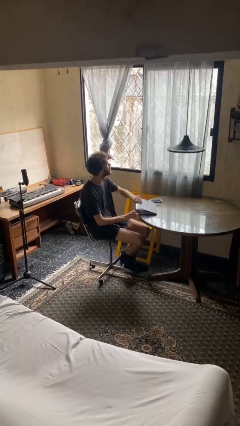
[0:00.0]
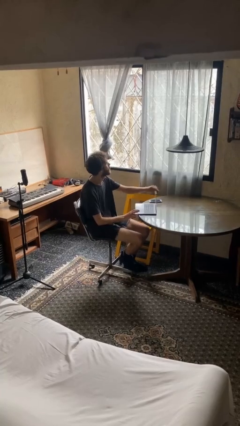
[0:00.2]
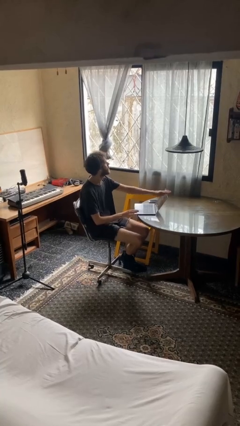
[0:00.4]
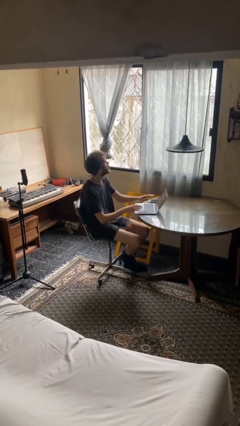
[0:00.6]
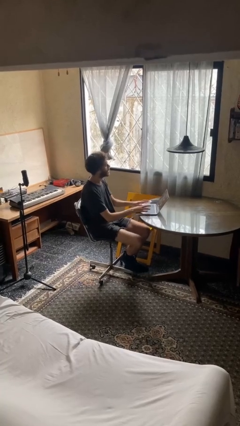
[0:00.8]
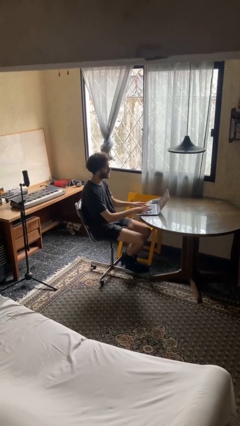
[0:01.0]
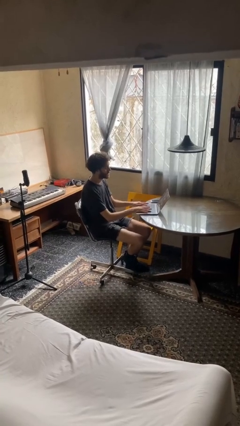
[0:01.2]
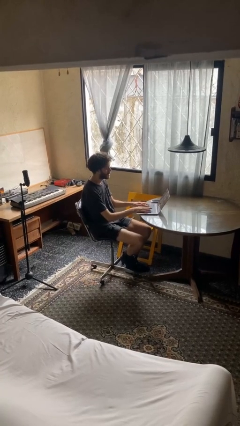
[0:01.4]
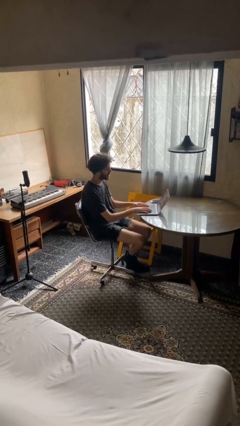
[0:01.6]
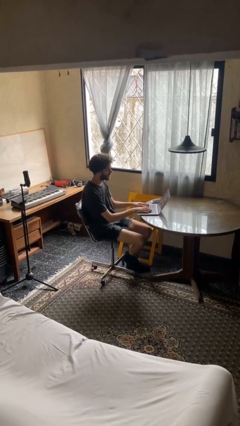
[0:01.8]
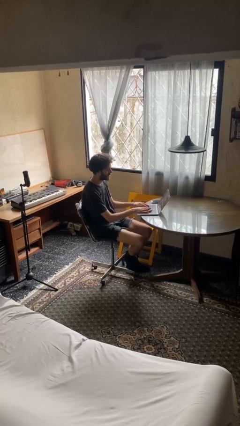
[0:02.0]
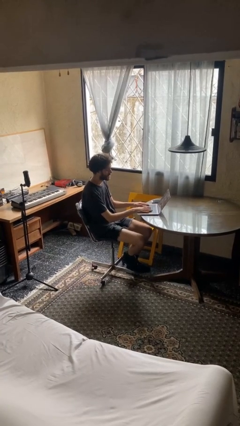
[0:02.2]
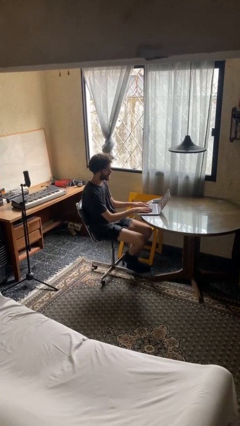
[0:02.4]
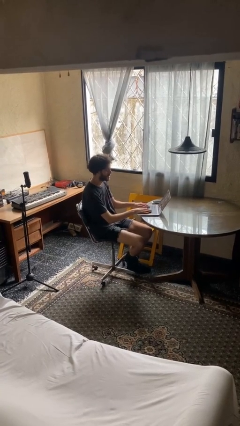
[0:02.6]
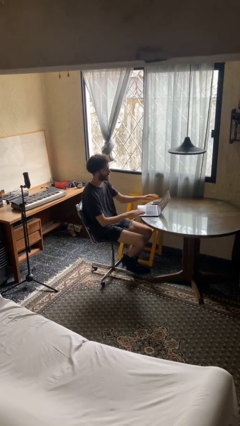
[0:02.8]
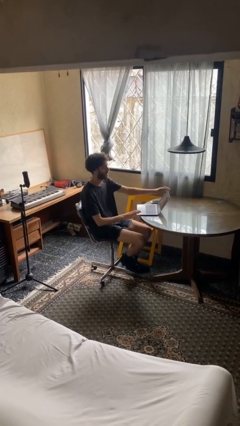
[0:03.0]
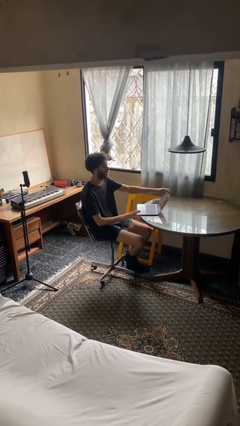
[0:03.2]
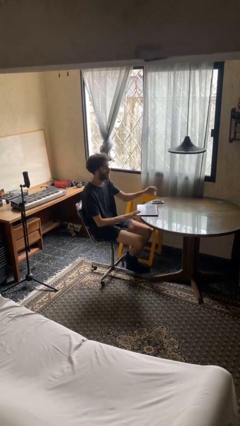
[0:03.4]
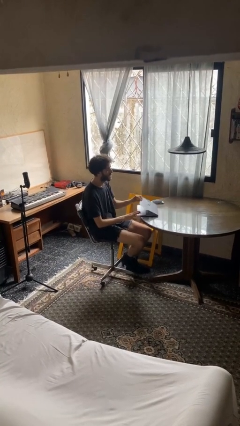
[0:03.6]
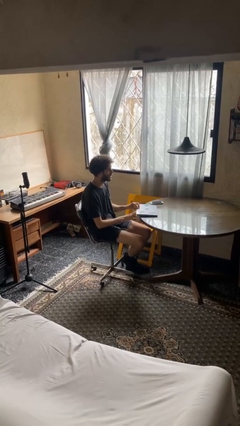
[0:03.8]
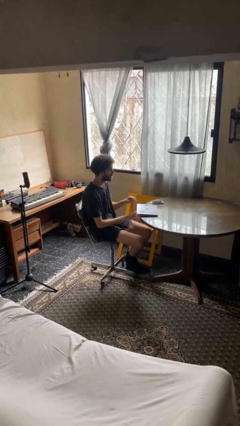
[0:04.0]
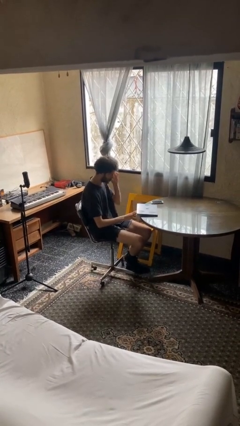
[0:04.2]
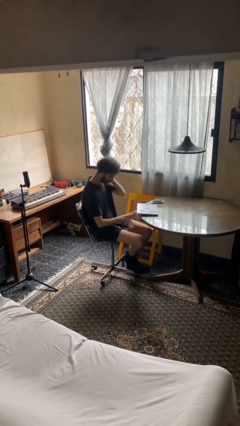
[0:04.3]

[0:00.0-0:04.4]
person interacts with laptop

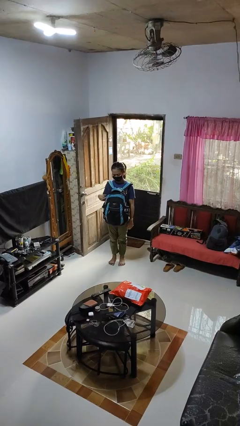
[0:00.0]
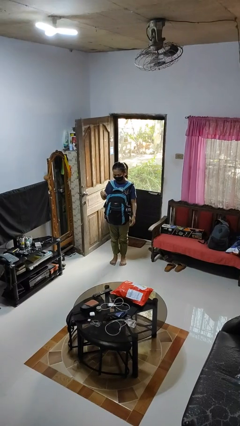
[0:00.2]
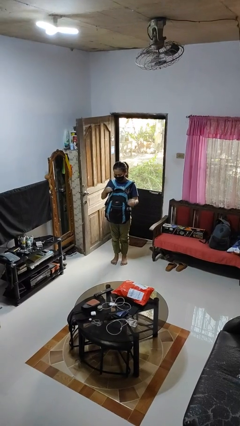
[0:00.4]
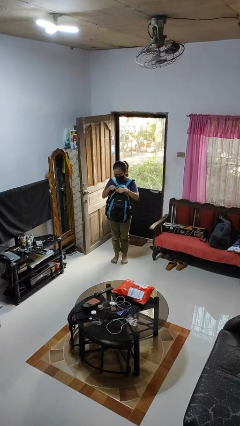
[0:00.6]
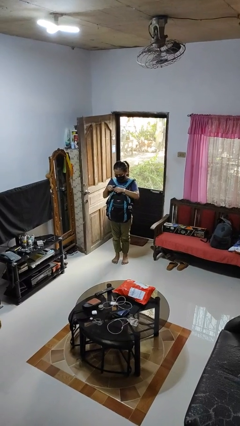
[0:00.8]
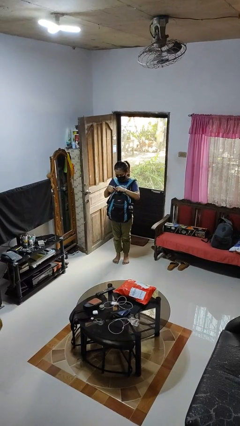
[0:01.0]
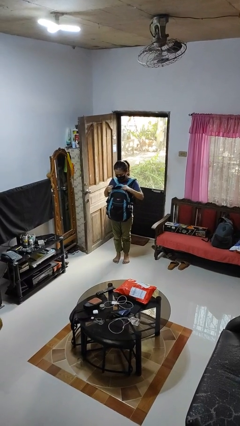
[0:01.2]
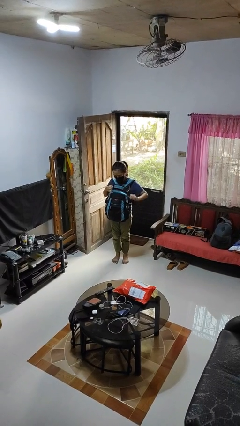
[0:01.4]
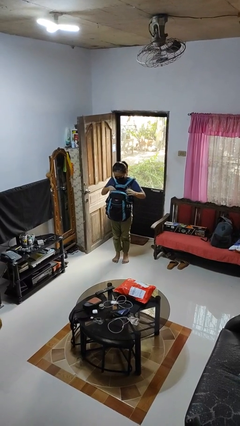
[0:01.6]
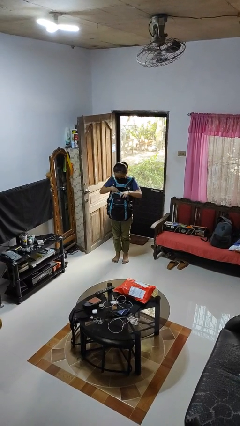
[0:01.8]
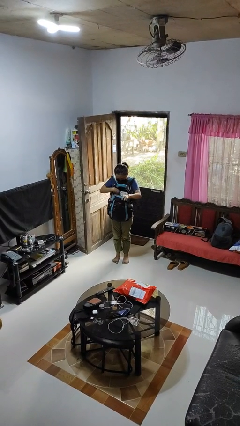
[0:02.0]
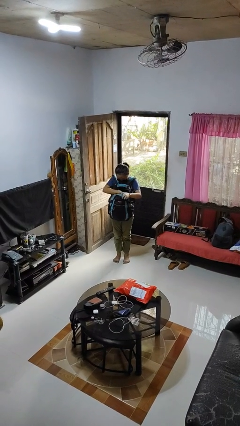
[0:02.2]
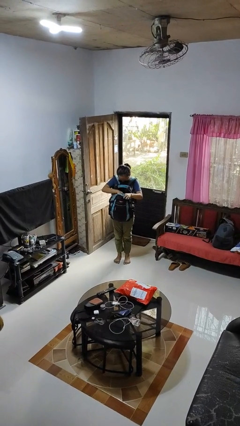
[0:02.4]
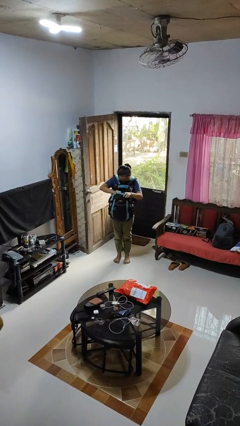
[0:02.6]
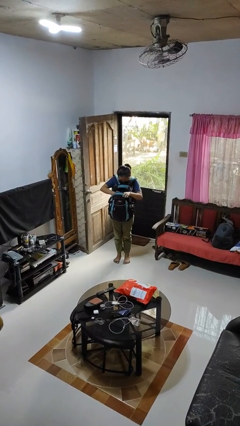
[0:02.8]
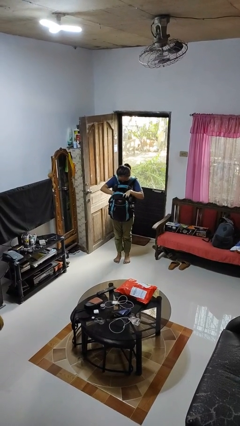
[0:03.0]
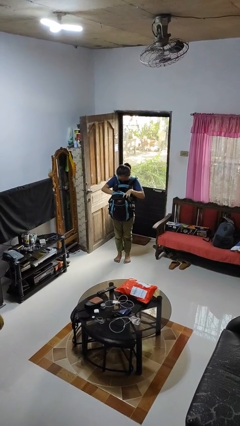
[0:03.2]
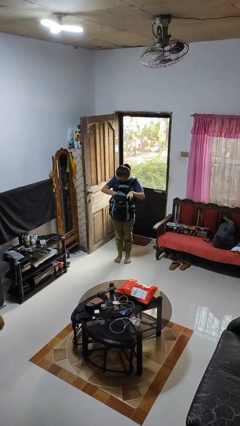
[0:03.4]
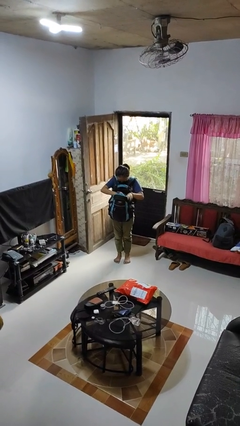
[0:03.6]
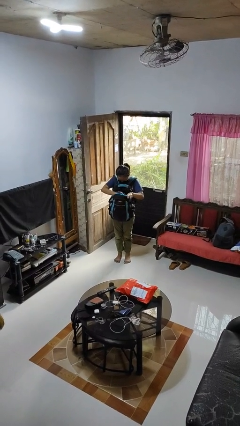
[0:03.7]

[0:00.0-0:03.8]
person searches in backpack

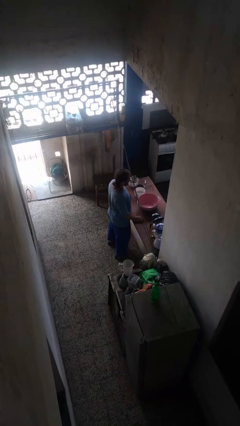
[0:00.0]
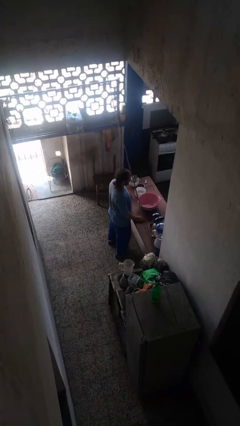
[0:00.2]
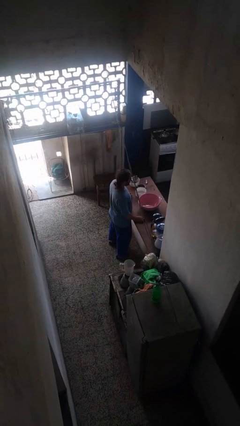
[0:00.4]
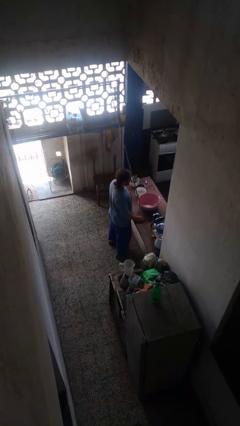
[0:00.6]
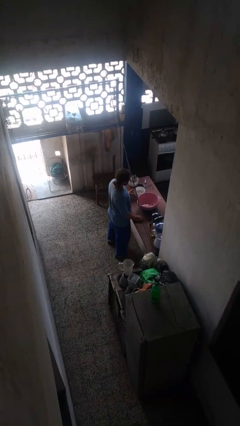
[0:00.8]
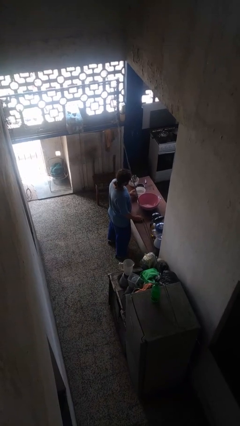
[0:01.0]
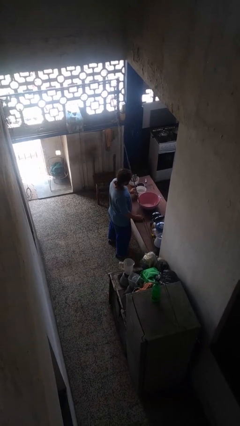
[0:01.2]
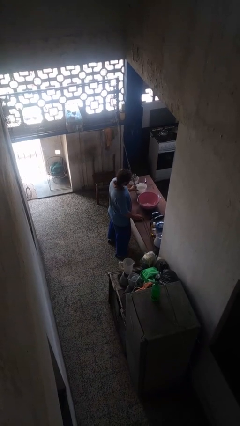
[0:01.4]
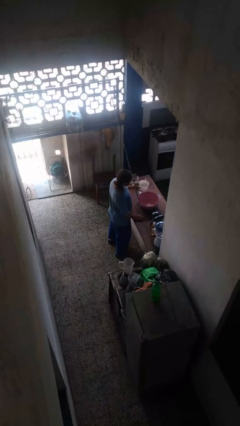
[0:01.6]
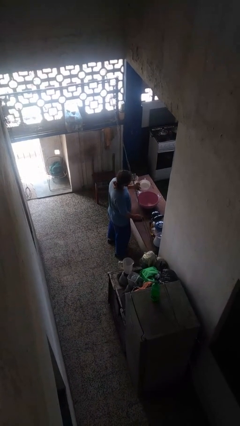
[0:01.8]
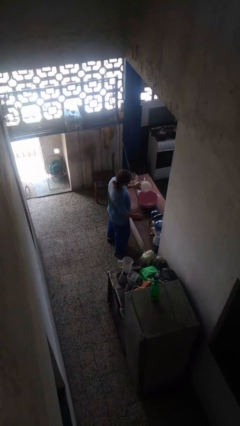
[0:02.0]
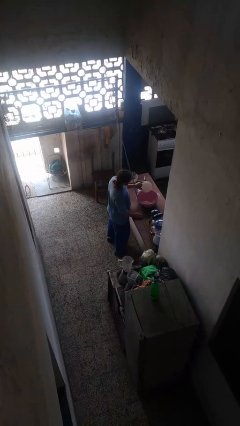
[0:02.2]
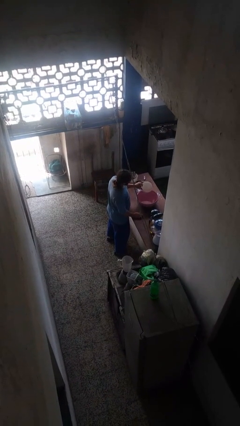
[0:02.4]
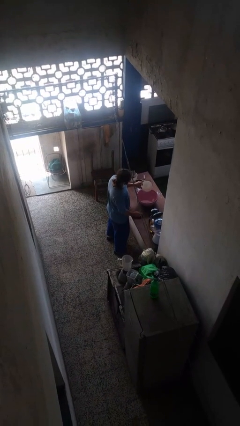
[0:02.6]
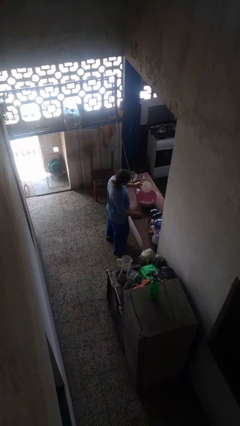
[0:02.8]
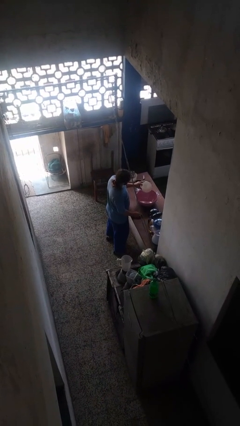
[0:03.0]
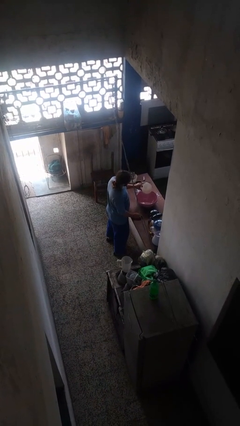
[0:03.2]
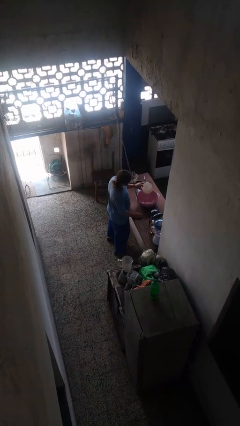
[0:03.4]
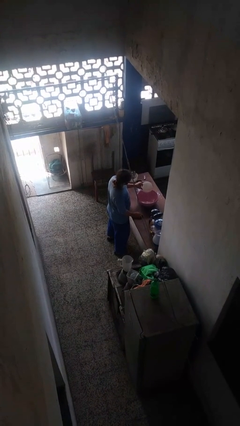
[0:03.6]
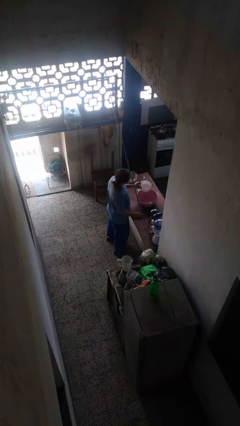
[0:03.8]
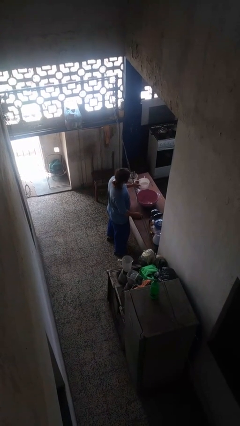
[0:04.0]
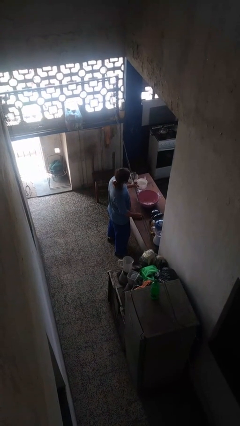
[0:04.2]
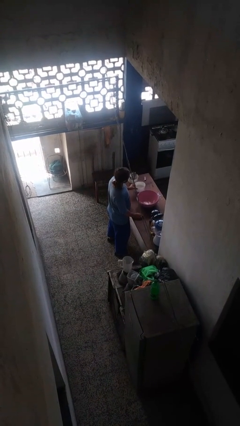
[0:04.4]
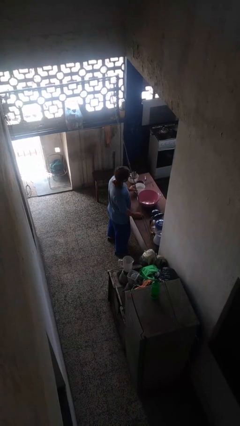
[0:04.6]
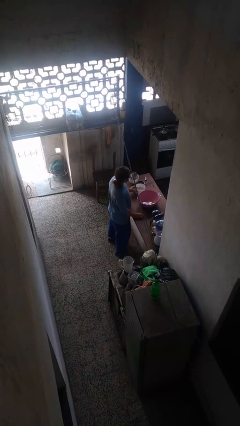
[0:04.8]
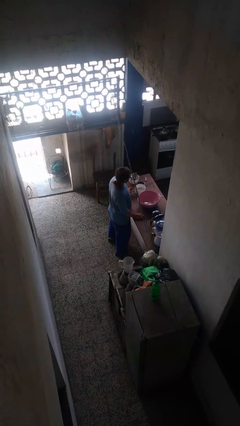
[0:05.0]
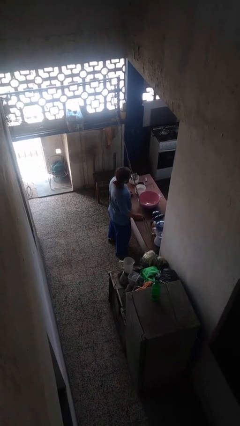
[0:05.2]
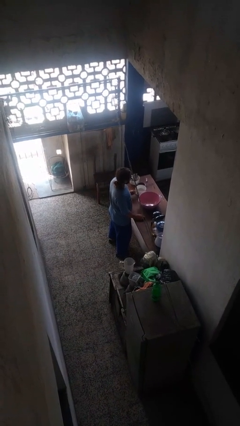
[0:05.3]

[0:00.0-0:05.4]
person pours into bowl

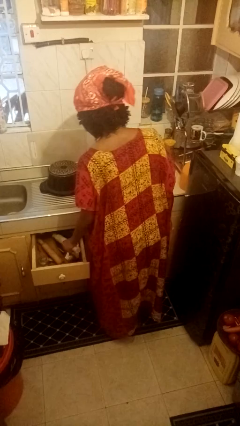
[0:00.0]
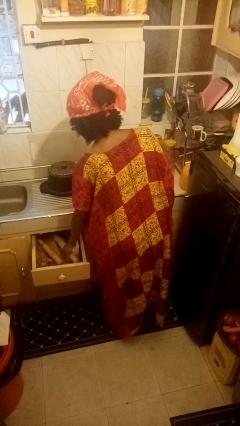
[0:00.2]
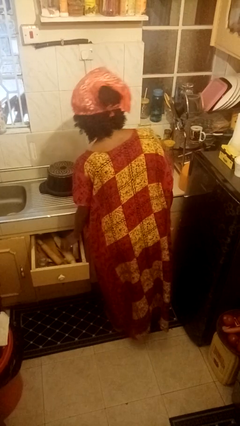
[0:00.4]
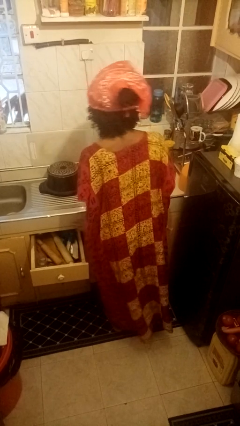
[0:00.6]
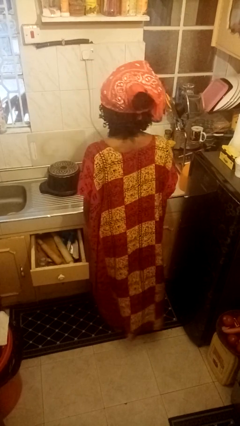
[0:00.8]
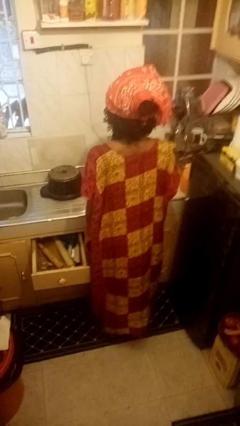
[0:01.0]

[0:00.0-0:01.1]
person puts object into kitchen drawer

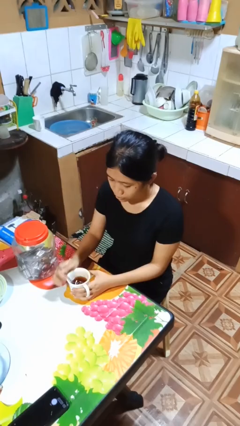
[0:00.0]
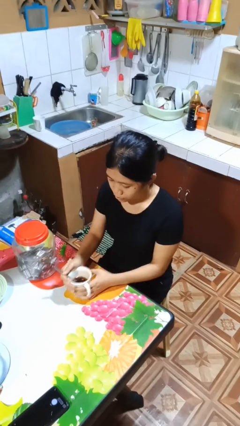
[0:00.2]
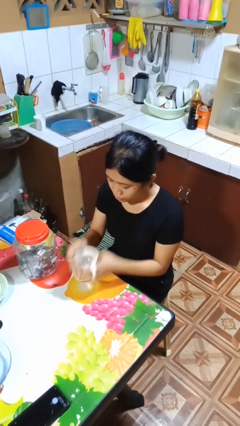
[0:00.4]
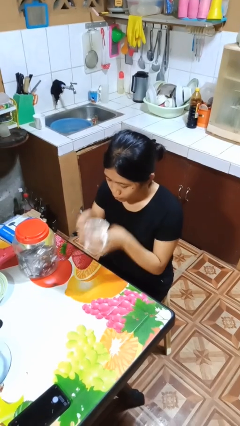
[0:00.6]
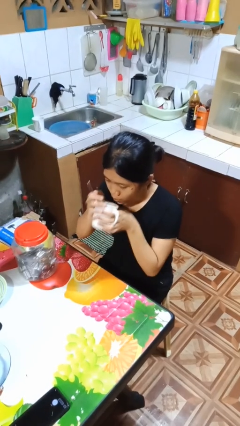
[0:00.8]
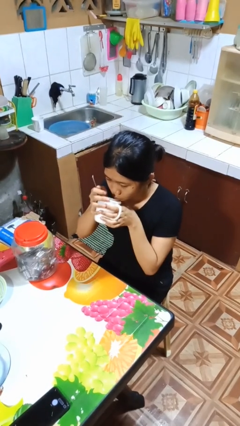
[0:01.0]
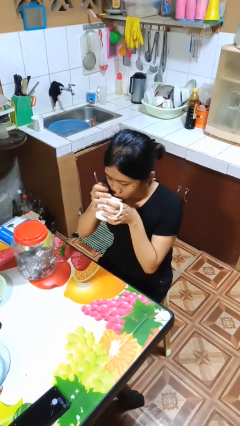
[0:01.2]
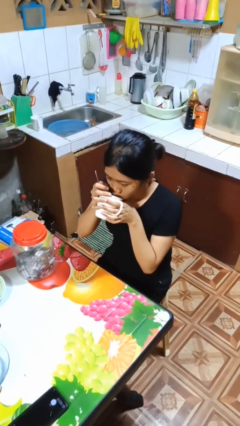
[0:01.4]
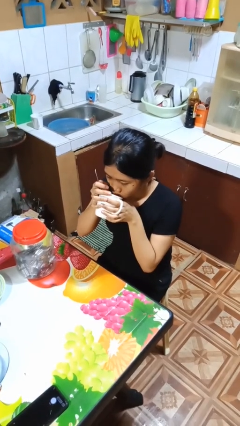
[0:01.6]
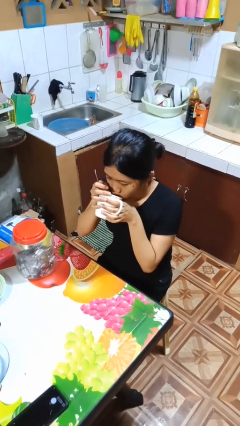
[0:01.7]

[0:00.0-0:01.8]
person drinks from mug

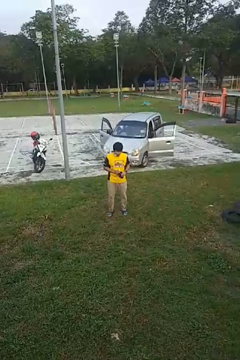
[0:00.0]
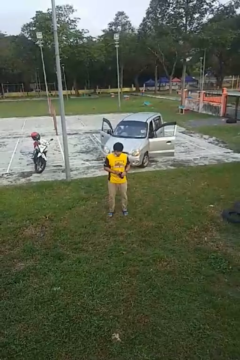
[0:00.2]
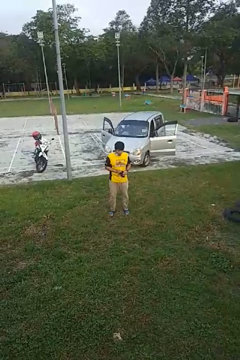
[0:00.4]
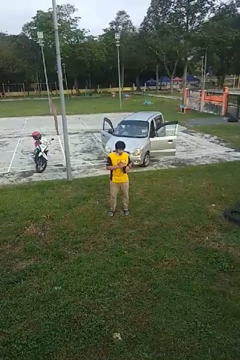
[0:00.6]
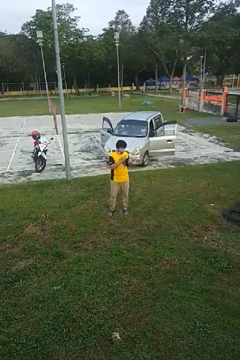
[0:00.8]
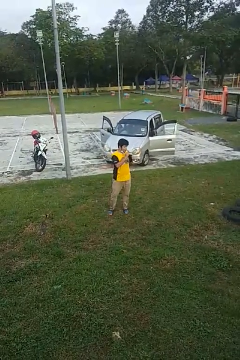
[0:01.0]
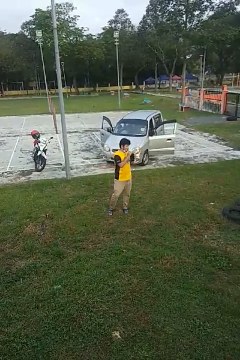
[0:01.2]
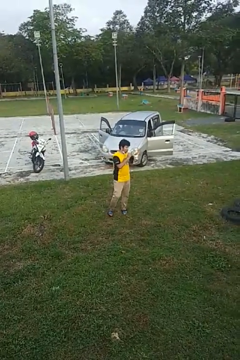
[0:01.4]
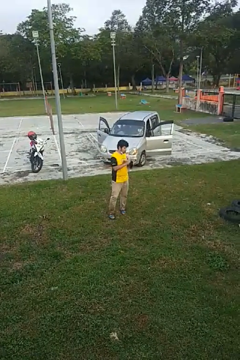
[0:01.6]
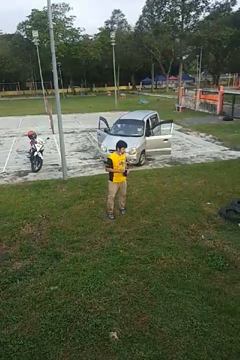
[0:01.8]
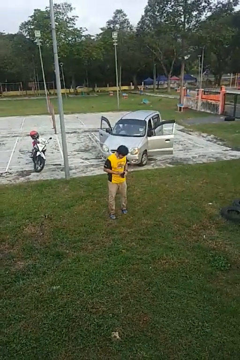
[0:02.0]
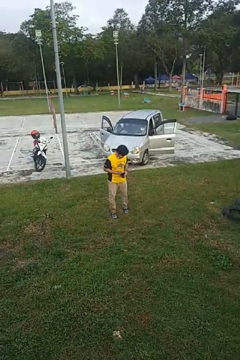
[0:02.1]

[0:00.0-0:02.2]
person drinks from straw
